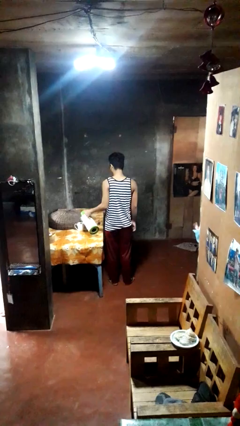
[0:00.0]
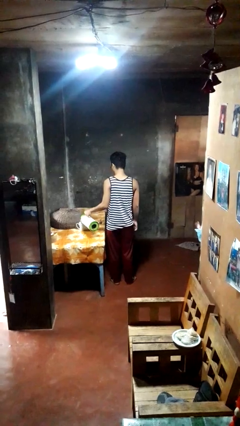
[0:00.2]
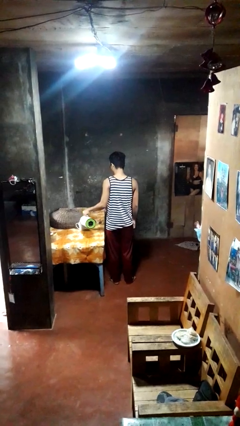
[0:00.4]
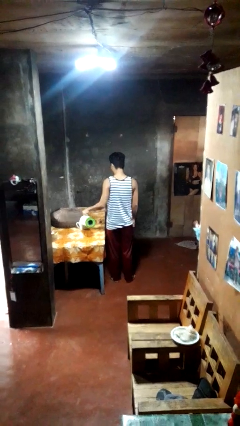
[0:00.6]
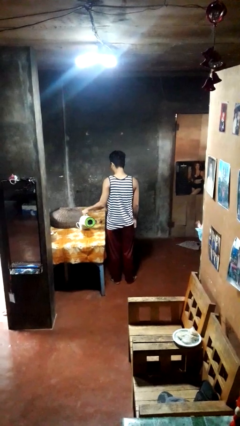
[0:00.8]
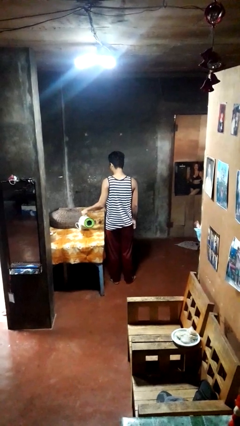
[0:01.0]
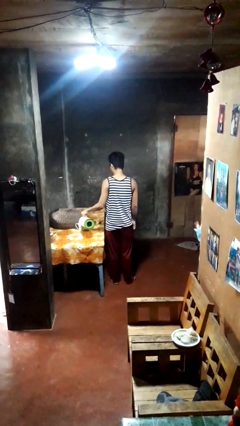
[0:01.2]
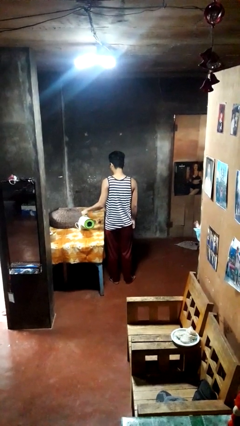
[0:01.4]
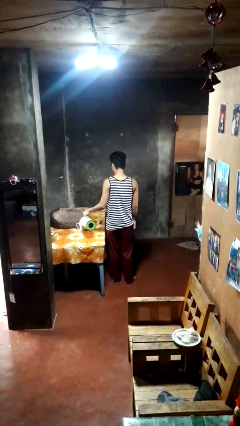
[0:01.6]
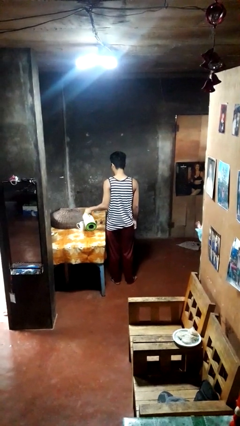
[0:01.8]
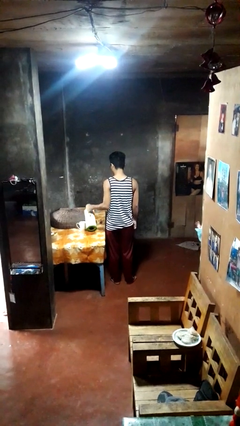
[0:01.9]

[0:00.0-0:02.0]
person pours coffee into mug

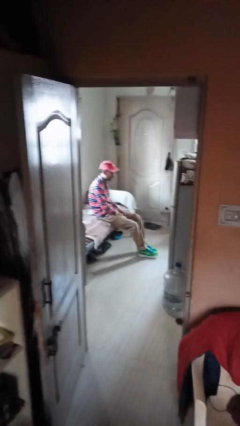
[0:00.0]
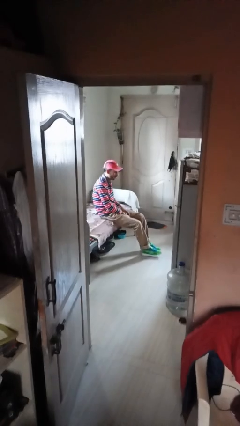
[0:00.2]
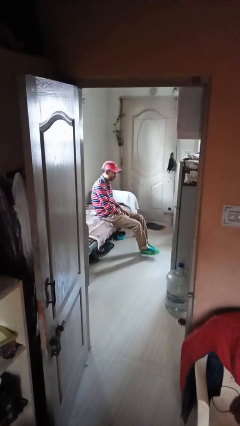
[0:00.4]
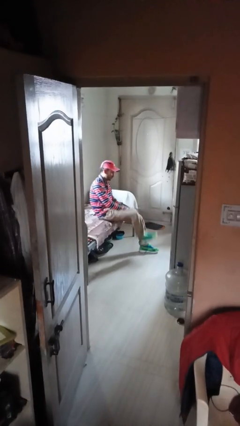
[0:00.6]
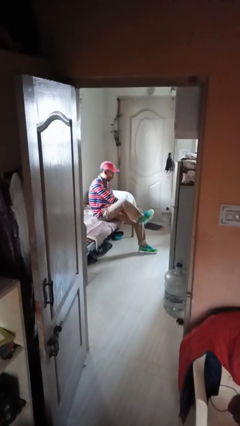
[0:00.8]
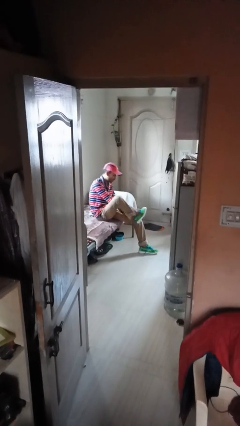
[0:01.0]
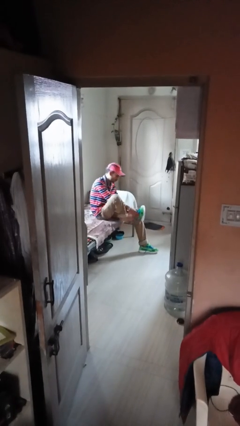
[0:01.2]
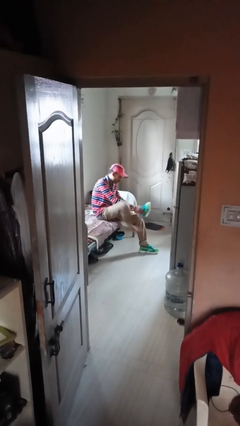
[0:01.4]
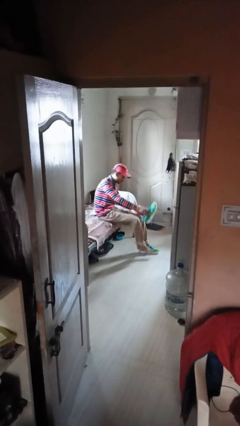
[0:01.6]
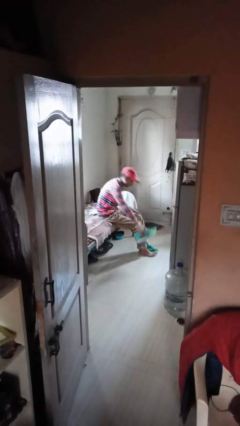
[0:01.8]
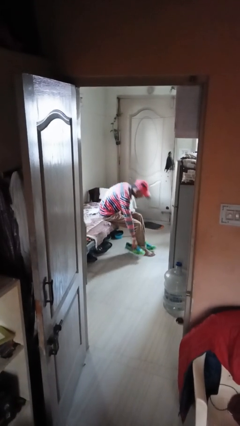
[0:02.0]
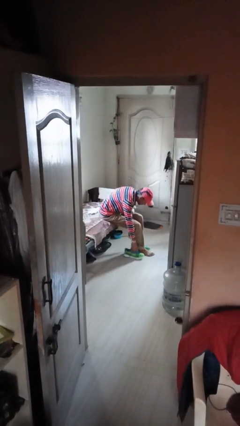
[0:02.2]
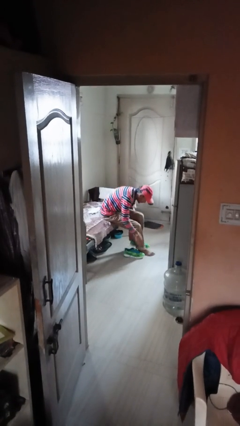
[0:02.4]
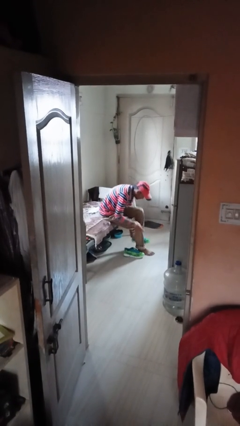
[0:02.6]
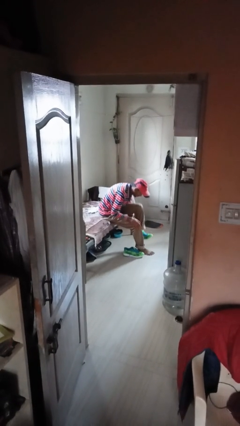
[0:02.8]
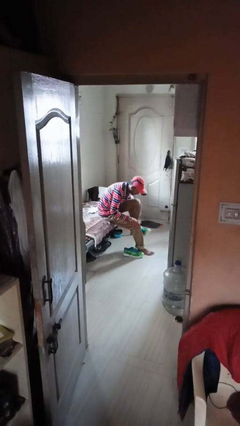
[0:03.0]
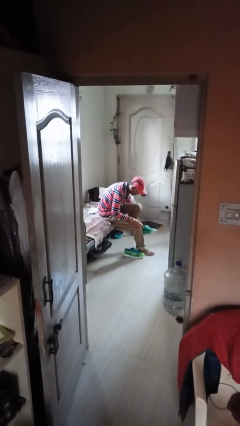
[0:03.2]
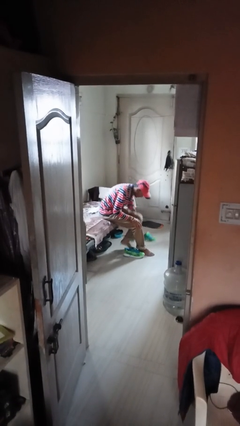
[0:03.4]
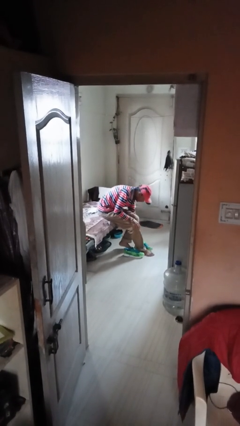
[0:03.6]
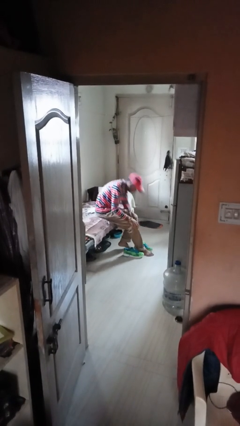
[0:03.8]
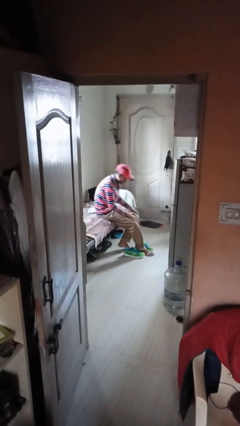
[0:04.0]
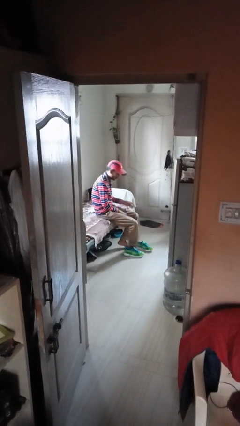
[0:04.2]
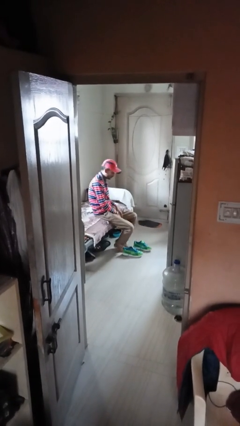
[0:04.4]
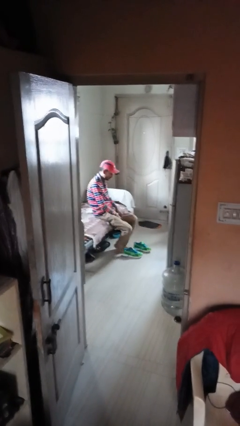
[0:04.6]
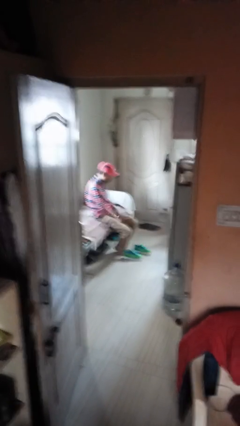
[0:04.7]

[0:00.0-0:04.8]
person takes off shoes

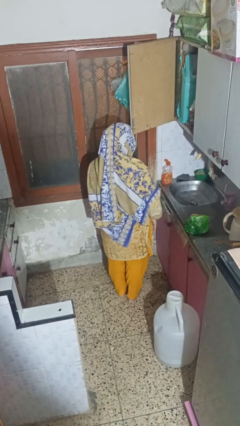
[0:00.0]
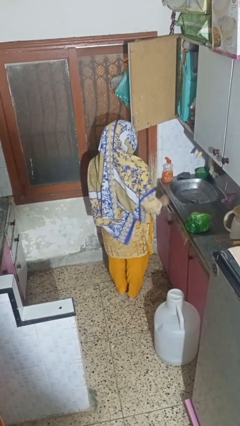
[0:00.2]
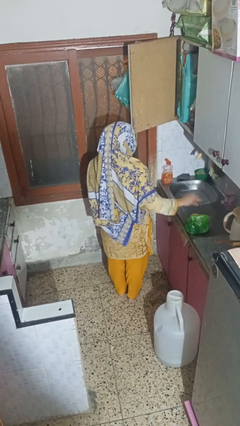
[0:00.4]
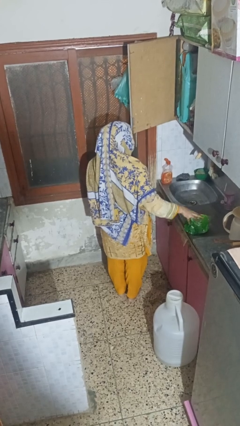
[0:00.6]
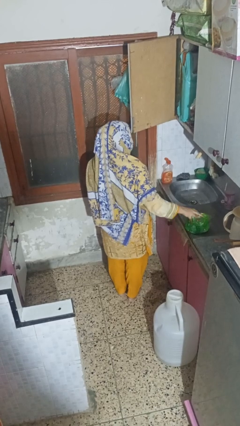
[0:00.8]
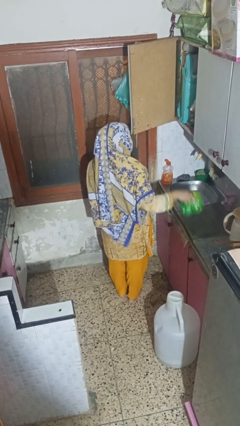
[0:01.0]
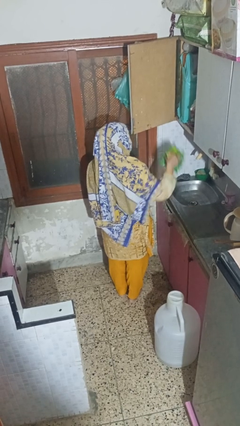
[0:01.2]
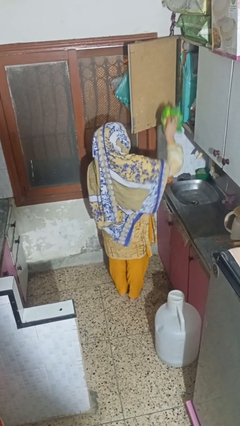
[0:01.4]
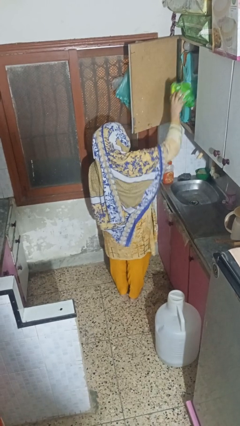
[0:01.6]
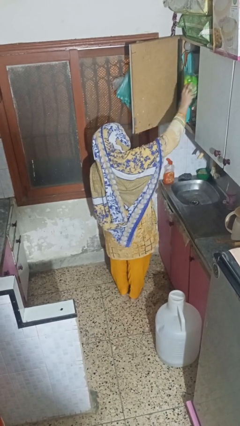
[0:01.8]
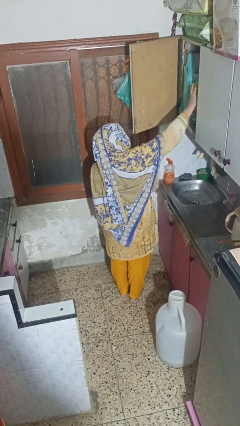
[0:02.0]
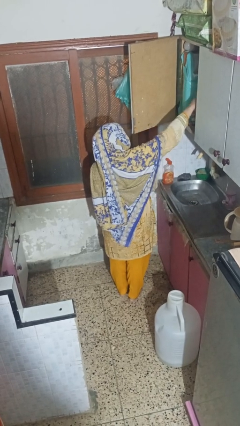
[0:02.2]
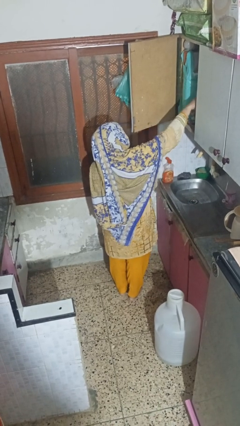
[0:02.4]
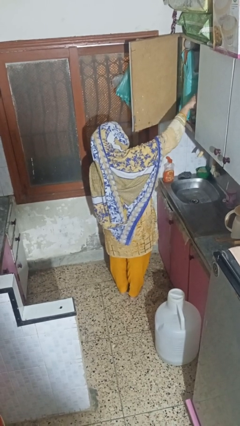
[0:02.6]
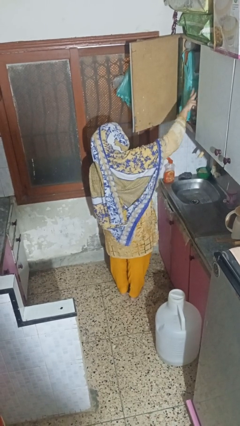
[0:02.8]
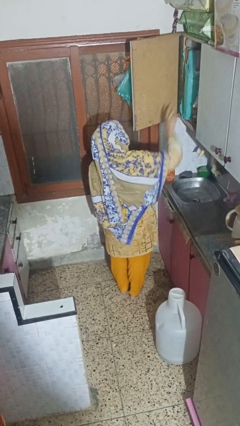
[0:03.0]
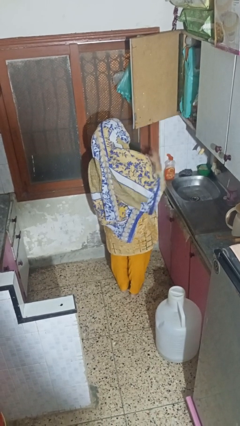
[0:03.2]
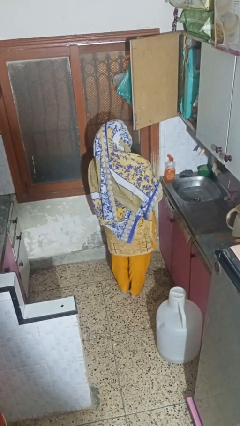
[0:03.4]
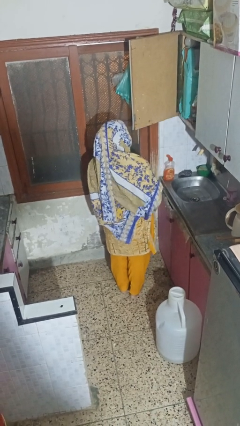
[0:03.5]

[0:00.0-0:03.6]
person puts object in cabinet

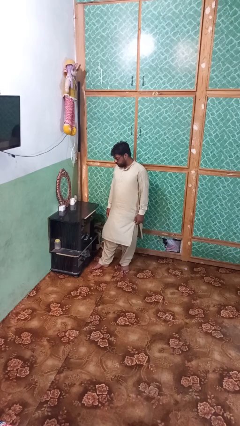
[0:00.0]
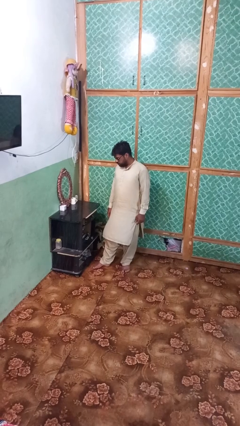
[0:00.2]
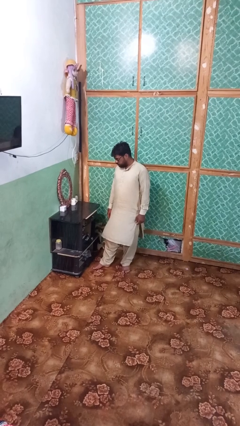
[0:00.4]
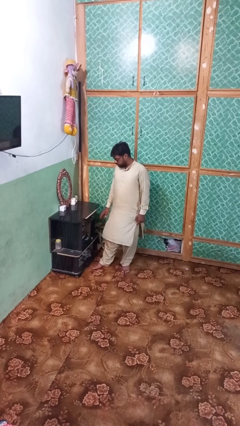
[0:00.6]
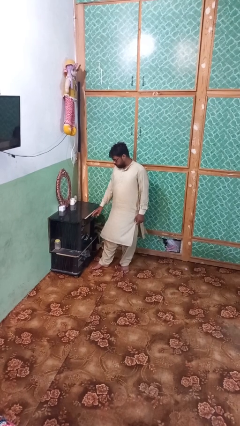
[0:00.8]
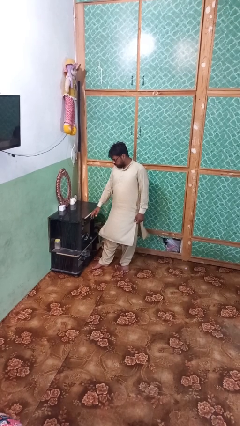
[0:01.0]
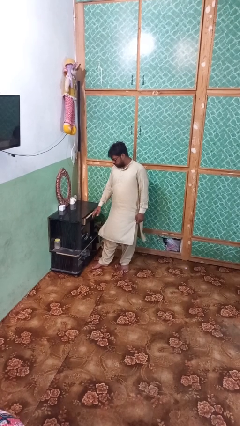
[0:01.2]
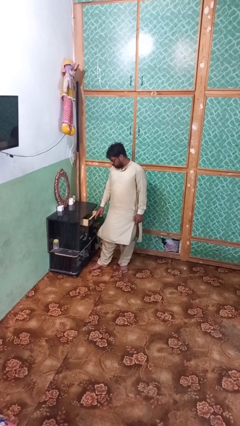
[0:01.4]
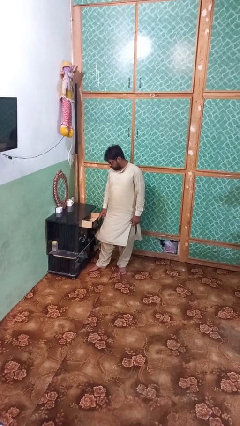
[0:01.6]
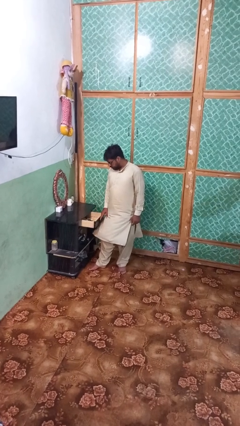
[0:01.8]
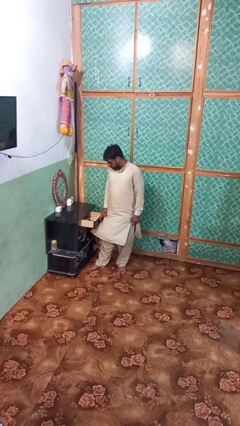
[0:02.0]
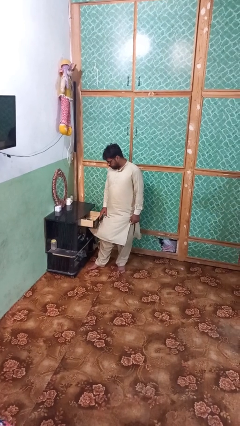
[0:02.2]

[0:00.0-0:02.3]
person opens dresser drawer

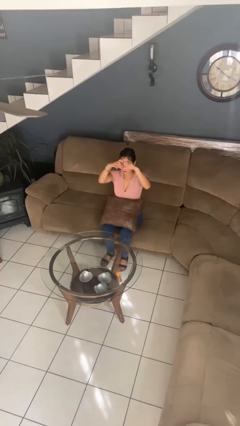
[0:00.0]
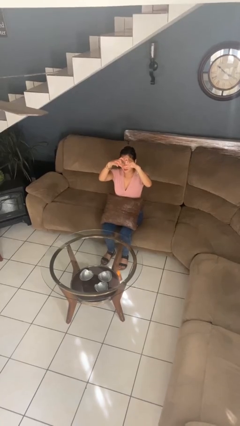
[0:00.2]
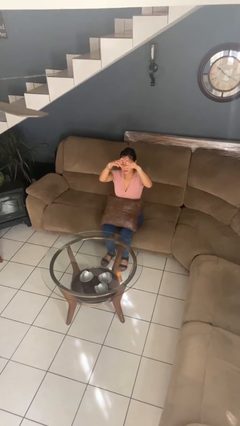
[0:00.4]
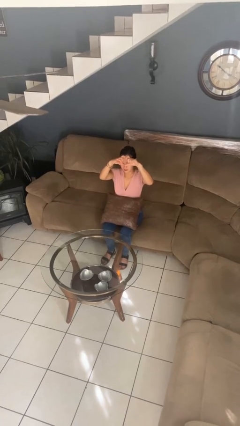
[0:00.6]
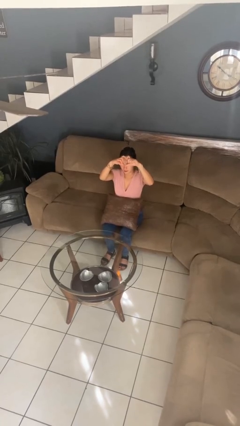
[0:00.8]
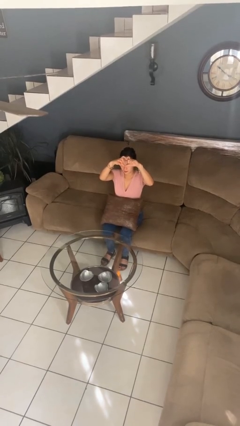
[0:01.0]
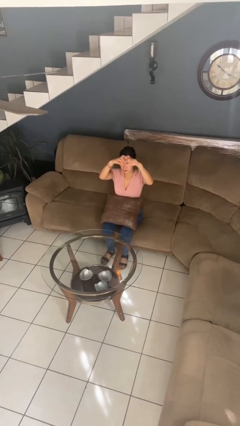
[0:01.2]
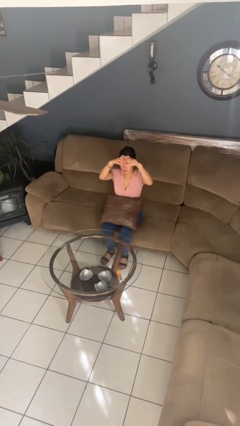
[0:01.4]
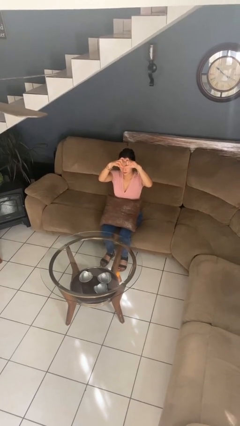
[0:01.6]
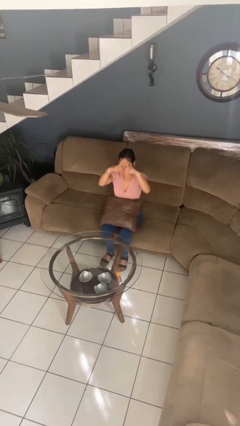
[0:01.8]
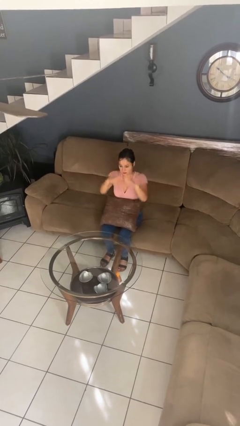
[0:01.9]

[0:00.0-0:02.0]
person gestures heart

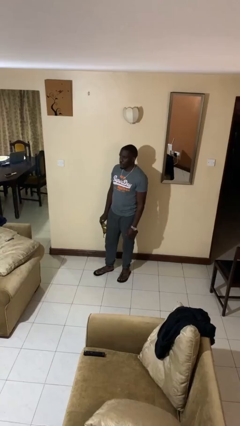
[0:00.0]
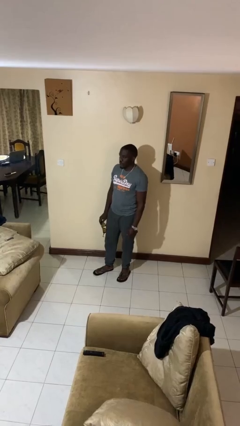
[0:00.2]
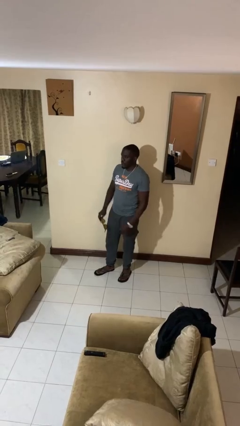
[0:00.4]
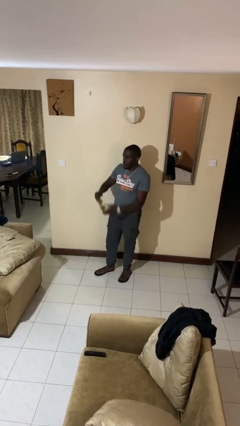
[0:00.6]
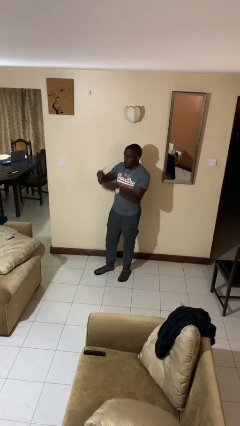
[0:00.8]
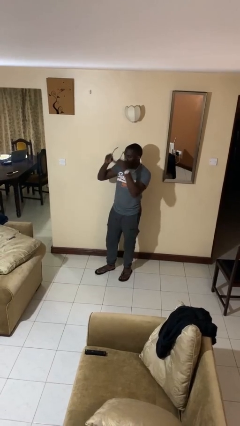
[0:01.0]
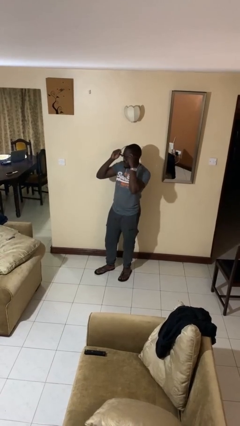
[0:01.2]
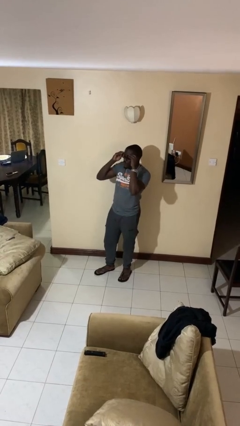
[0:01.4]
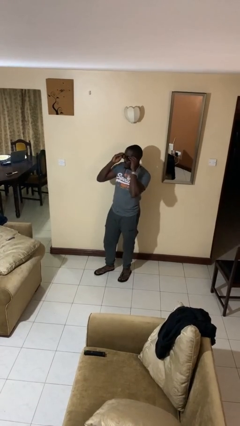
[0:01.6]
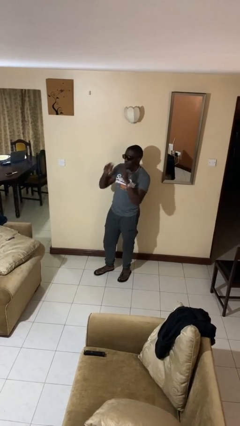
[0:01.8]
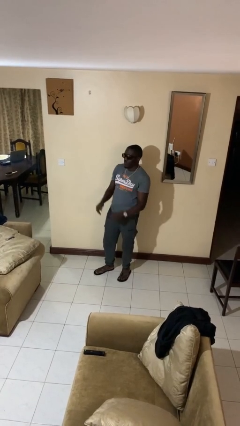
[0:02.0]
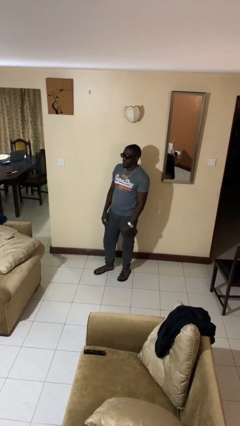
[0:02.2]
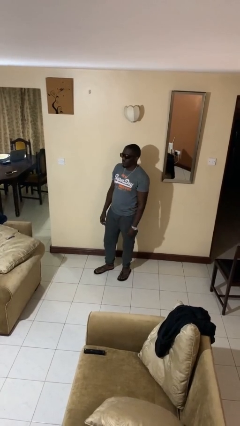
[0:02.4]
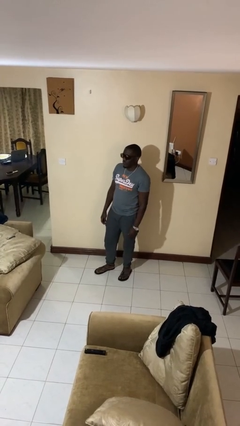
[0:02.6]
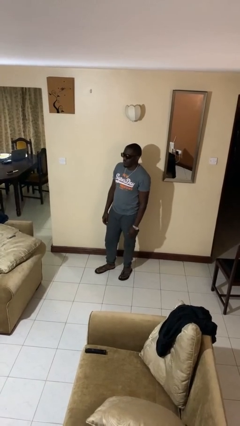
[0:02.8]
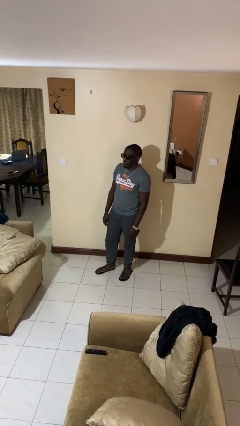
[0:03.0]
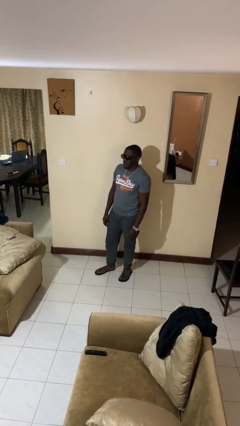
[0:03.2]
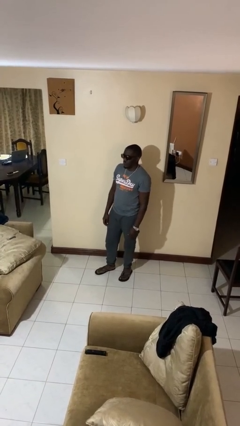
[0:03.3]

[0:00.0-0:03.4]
person puts on sunglasses
